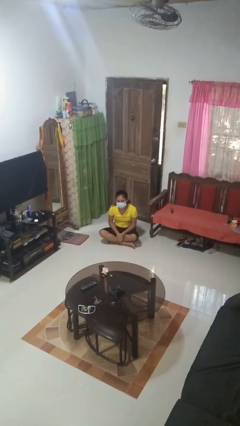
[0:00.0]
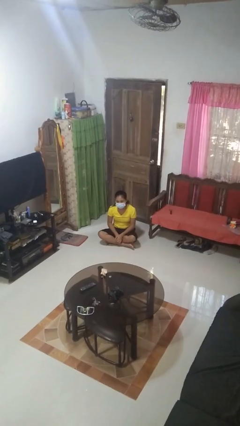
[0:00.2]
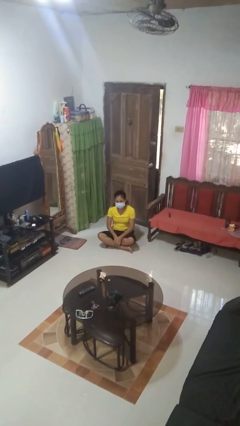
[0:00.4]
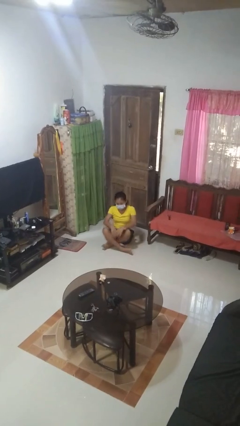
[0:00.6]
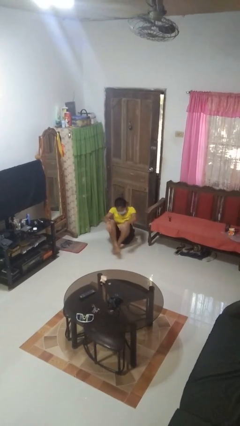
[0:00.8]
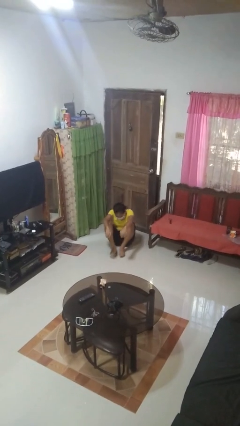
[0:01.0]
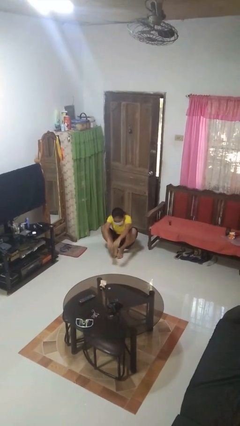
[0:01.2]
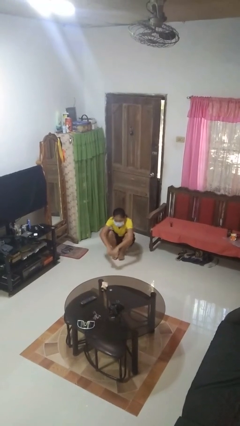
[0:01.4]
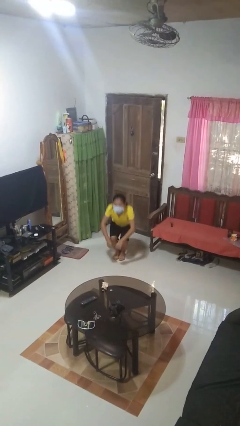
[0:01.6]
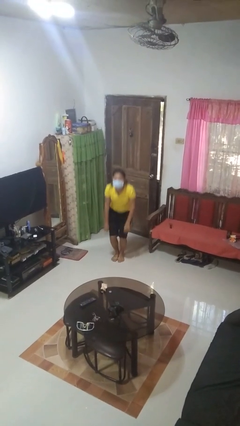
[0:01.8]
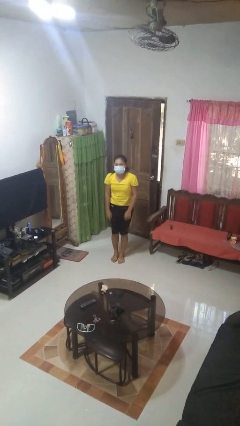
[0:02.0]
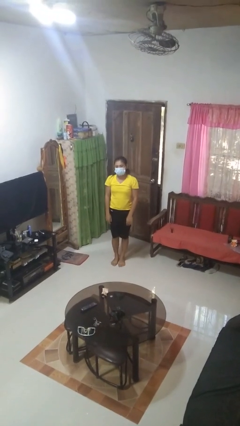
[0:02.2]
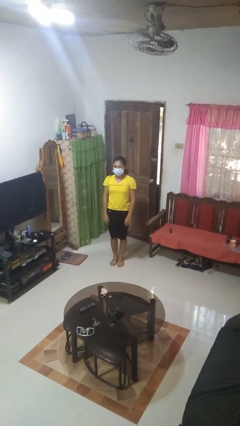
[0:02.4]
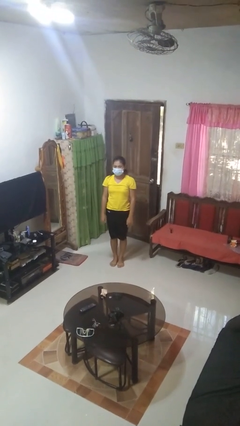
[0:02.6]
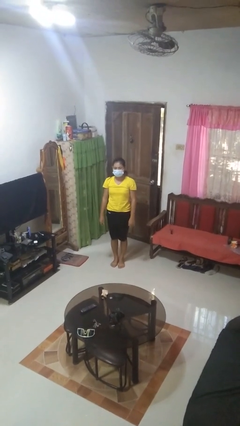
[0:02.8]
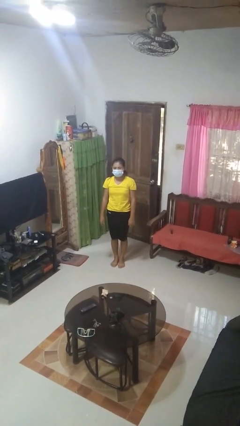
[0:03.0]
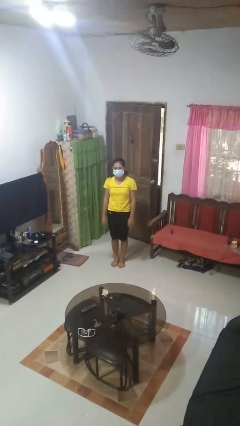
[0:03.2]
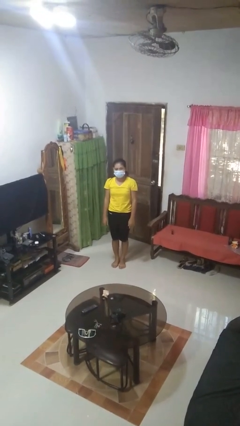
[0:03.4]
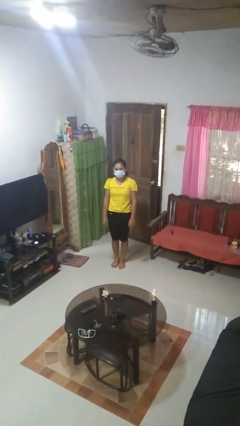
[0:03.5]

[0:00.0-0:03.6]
person stands up from floor

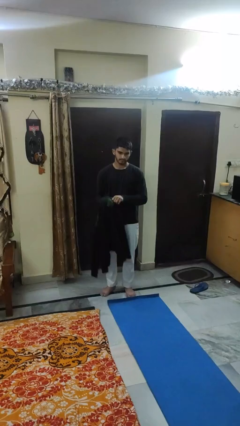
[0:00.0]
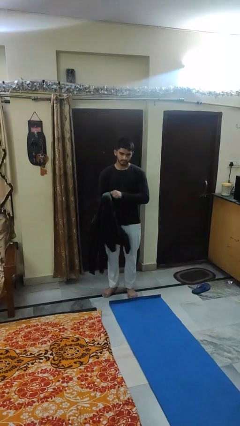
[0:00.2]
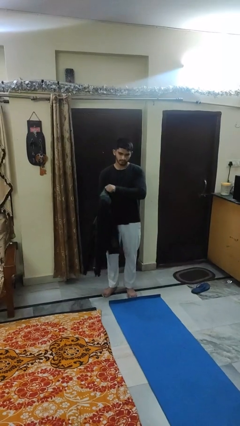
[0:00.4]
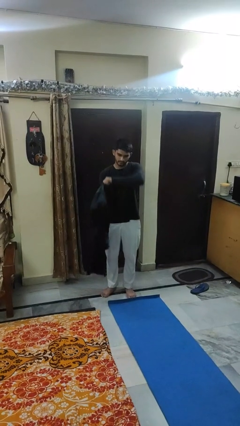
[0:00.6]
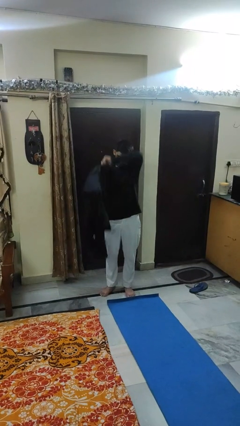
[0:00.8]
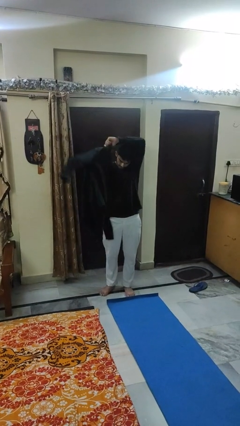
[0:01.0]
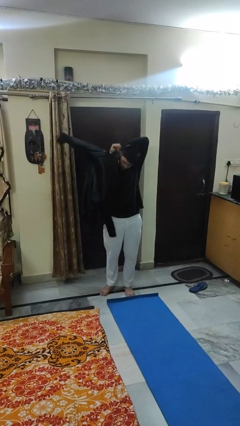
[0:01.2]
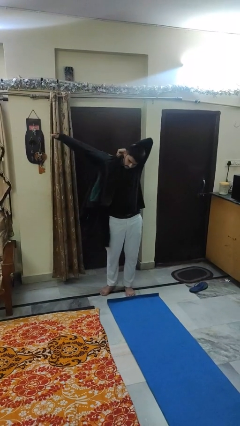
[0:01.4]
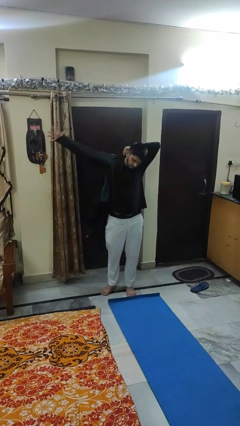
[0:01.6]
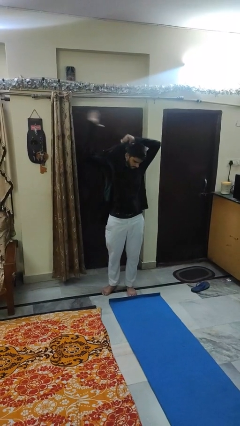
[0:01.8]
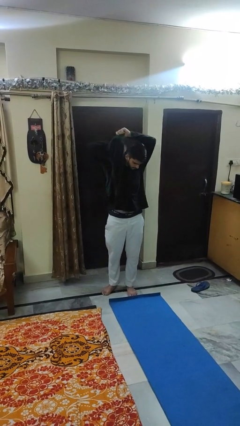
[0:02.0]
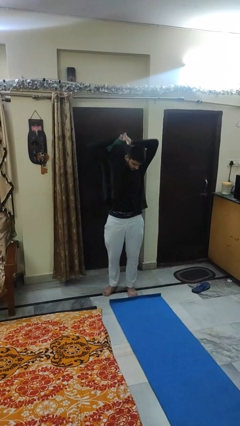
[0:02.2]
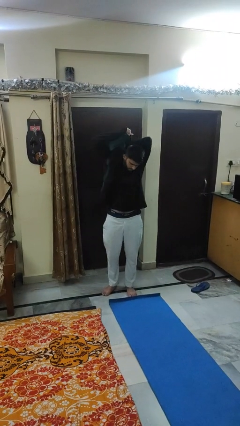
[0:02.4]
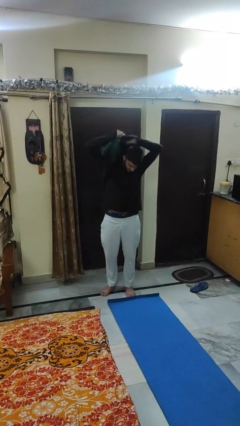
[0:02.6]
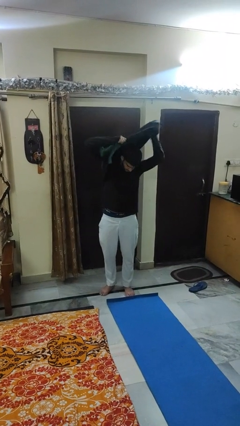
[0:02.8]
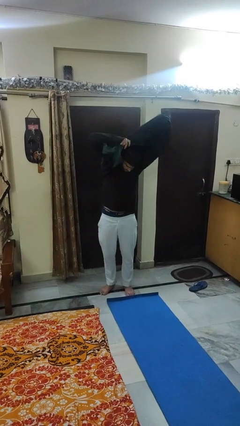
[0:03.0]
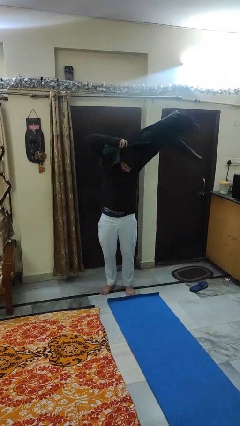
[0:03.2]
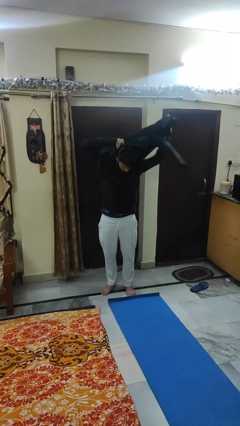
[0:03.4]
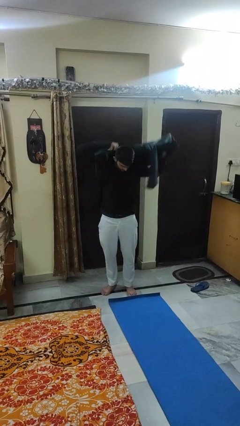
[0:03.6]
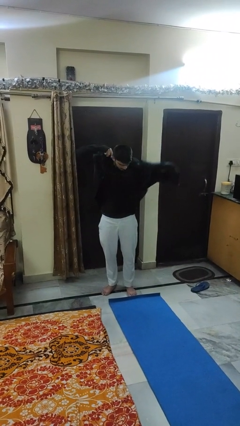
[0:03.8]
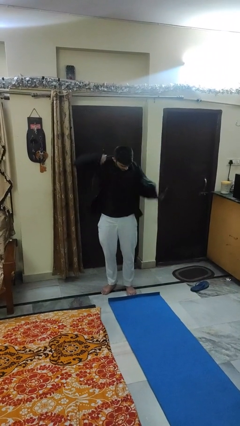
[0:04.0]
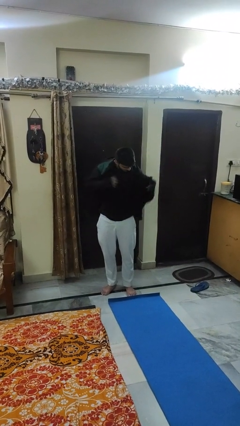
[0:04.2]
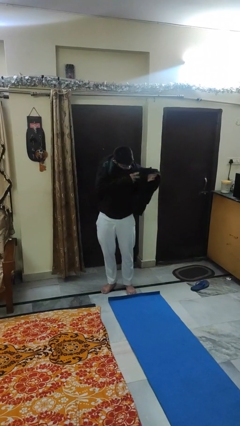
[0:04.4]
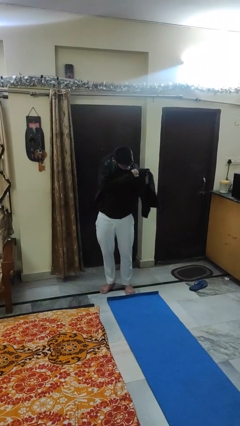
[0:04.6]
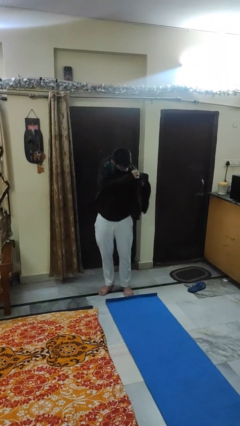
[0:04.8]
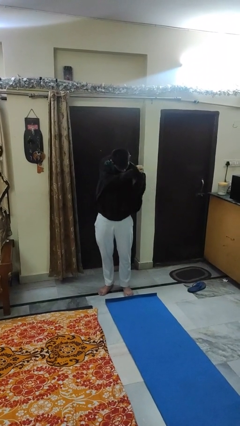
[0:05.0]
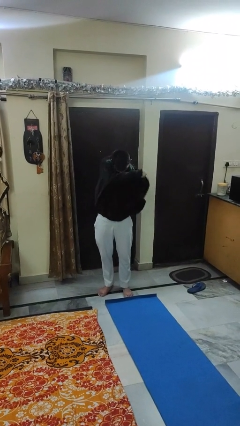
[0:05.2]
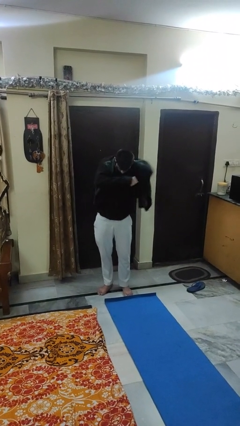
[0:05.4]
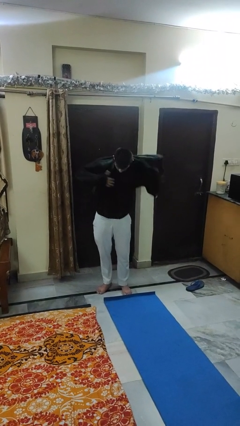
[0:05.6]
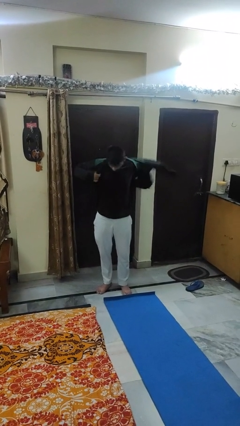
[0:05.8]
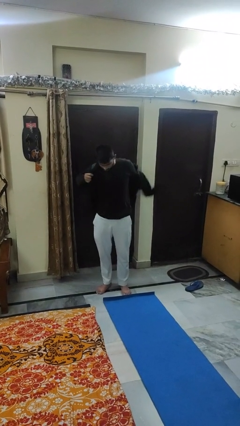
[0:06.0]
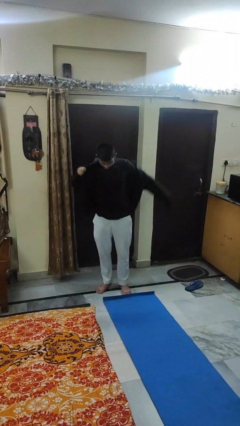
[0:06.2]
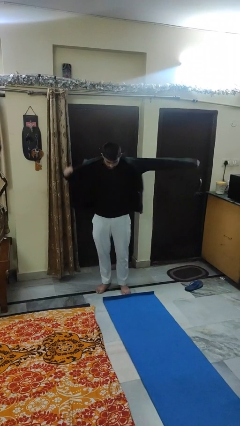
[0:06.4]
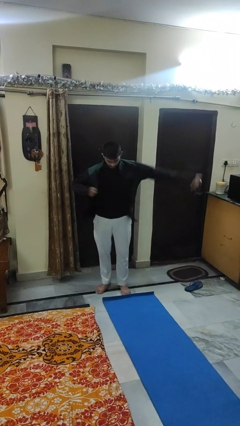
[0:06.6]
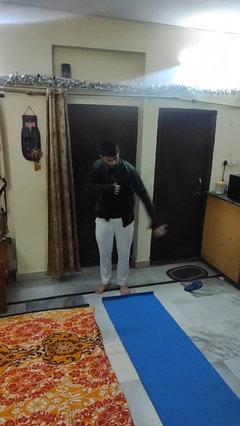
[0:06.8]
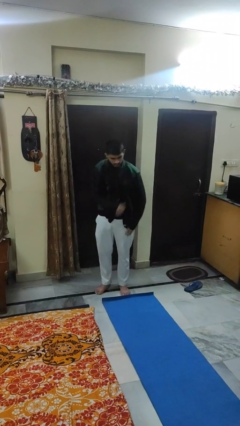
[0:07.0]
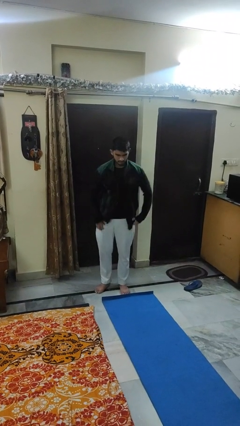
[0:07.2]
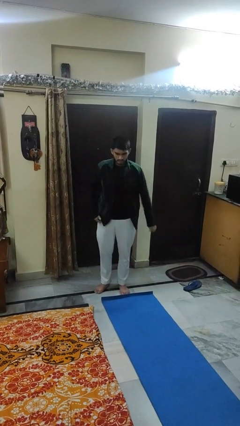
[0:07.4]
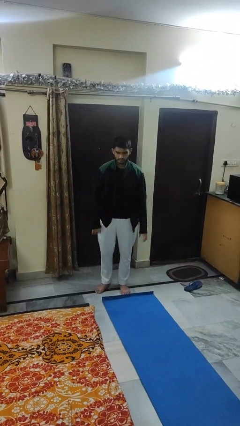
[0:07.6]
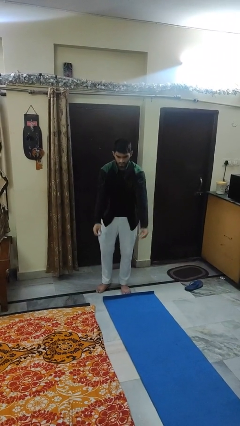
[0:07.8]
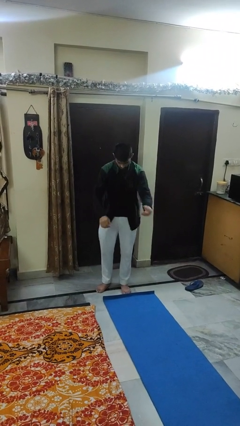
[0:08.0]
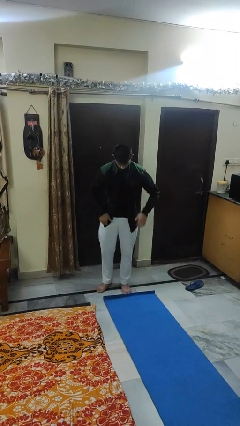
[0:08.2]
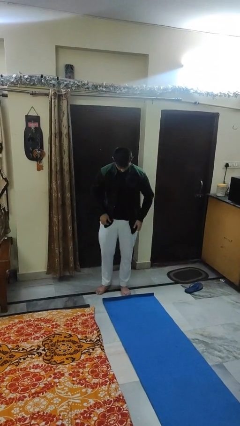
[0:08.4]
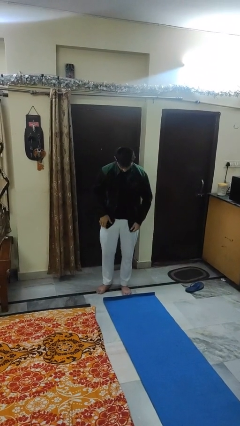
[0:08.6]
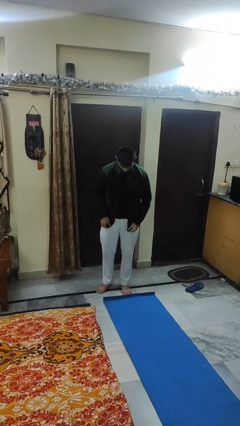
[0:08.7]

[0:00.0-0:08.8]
person puts on jacket

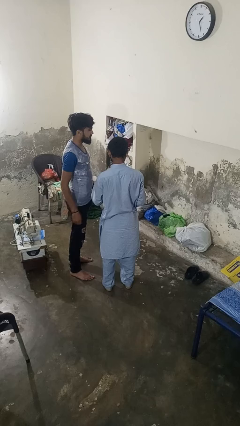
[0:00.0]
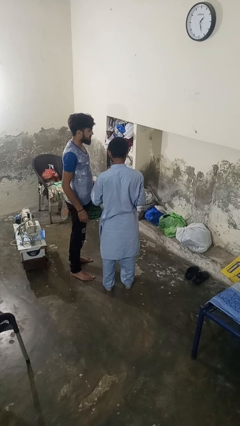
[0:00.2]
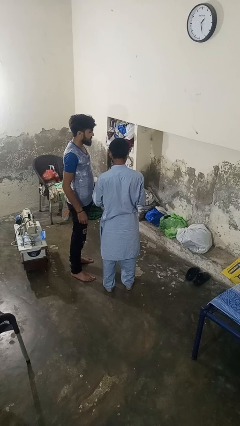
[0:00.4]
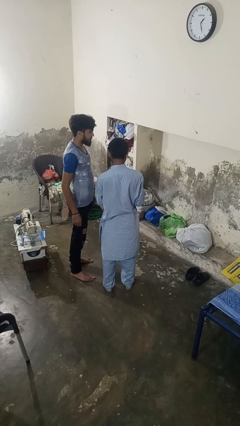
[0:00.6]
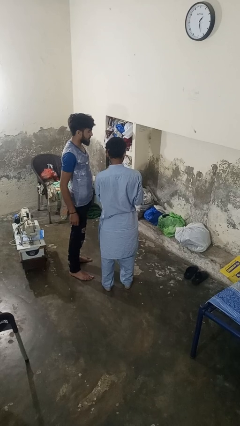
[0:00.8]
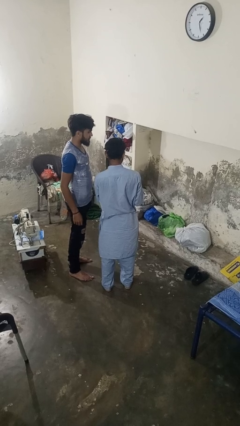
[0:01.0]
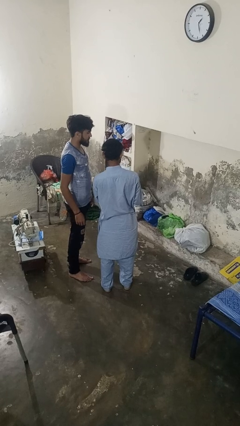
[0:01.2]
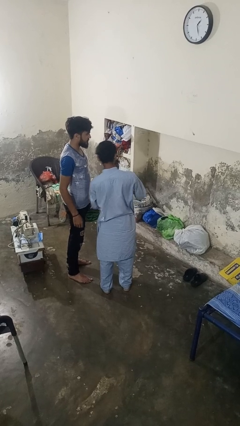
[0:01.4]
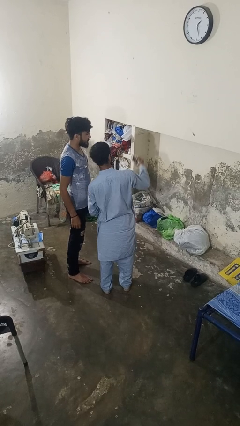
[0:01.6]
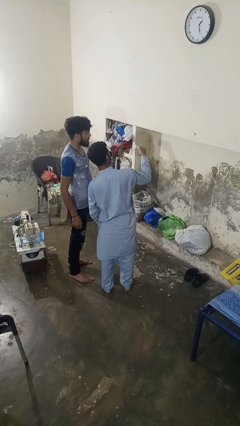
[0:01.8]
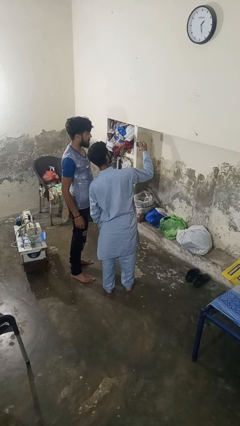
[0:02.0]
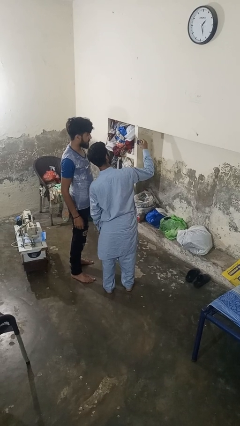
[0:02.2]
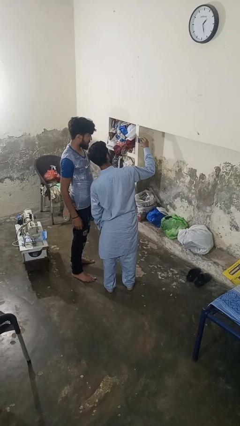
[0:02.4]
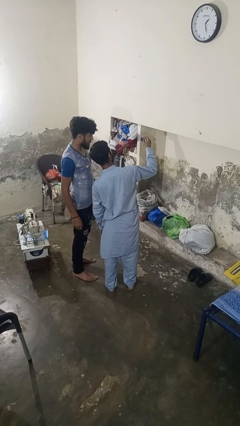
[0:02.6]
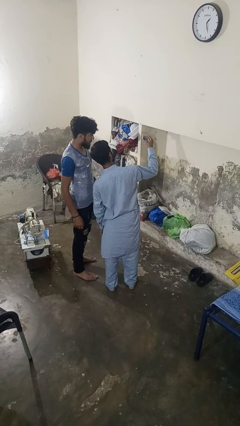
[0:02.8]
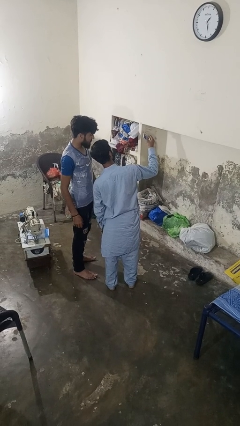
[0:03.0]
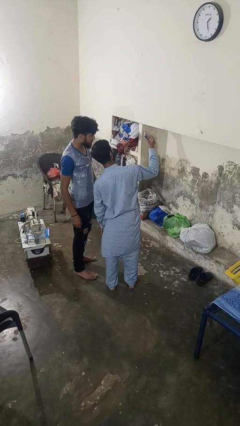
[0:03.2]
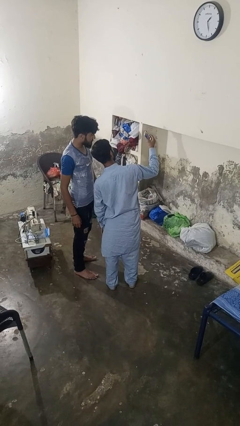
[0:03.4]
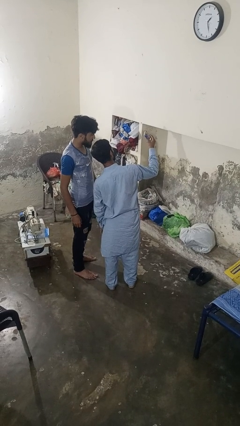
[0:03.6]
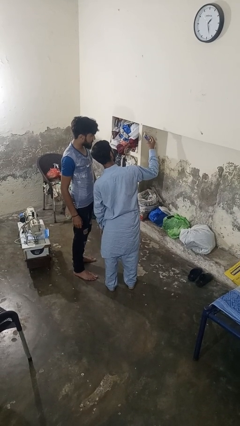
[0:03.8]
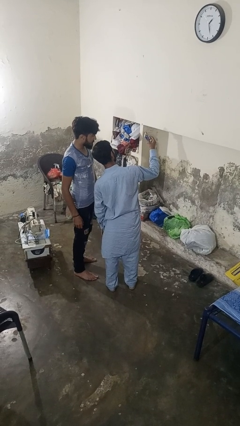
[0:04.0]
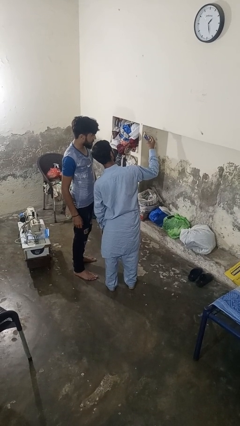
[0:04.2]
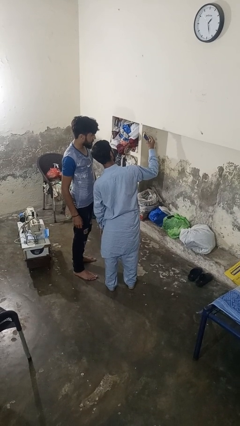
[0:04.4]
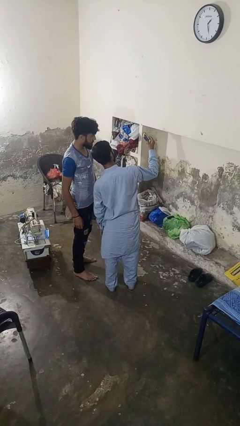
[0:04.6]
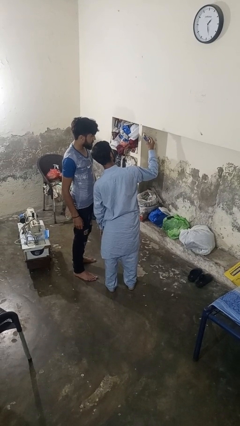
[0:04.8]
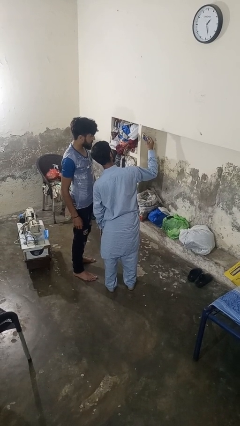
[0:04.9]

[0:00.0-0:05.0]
person takes selfie with person

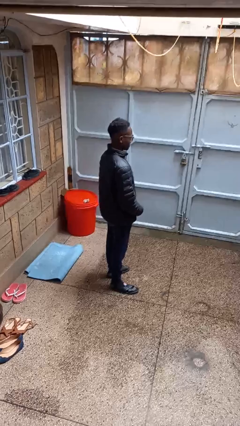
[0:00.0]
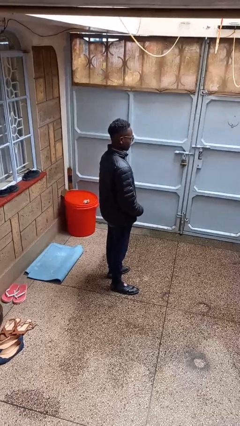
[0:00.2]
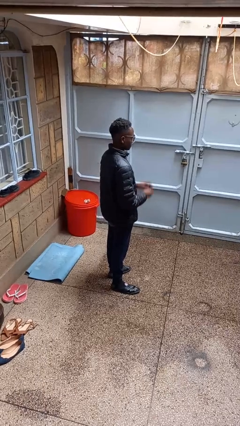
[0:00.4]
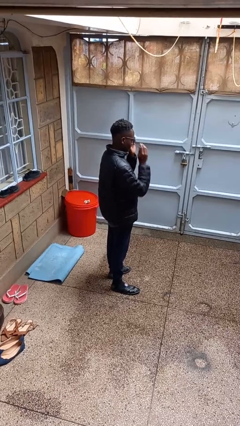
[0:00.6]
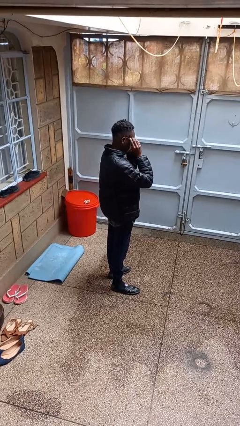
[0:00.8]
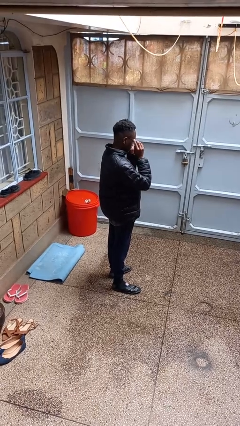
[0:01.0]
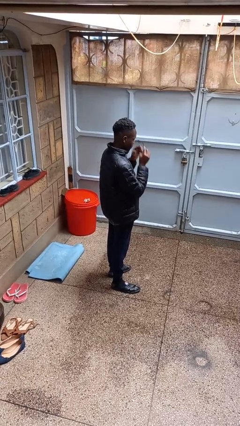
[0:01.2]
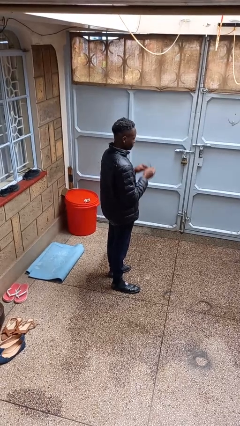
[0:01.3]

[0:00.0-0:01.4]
person takes off glasses
